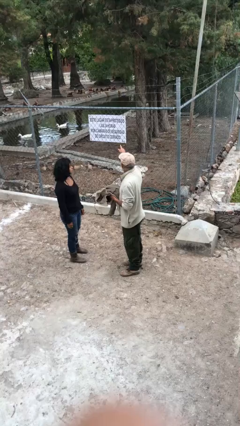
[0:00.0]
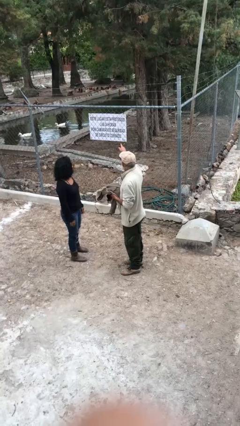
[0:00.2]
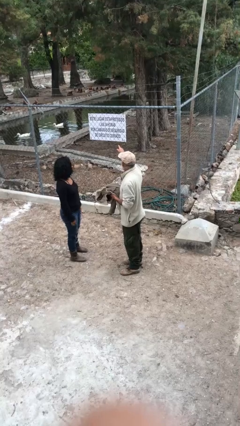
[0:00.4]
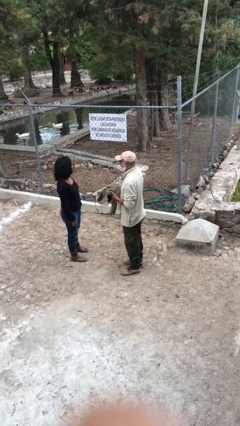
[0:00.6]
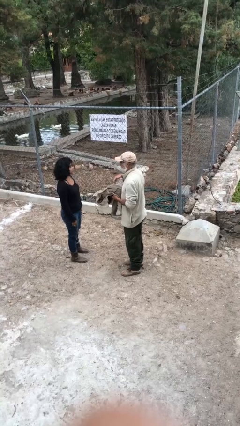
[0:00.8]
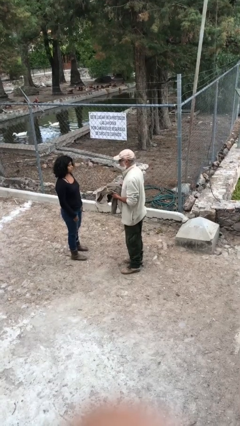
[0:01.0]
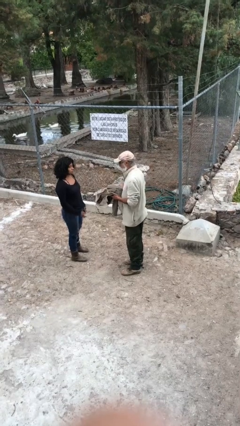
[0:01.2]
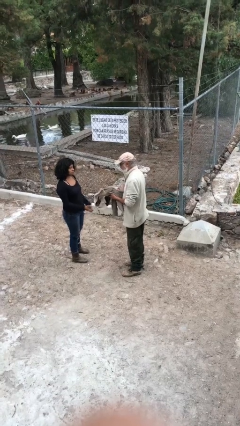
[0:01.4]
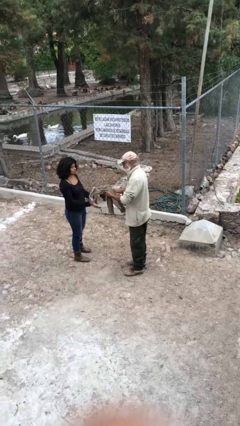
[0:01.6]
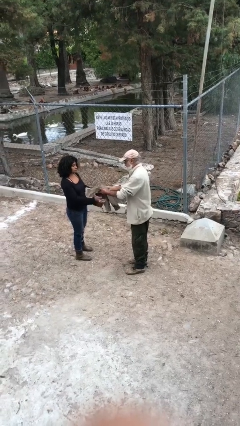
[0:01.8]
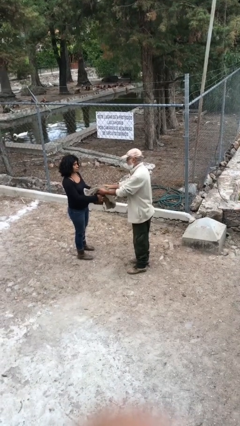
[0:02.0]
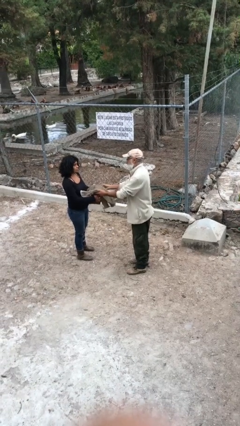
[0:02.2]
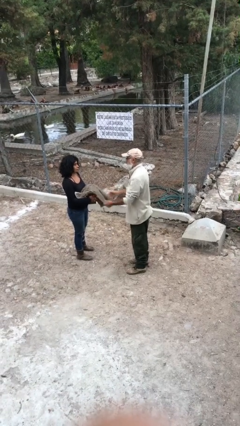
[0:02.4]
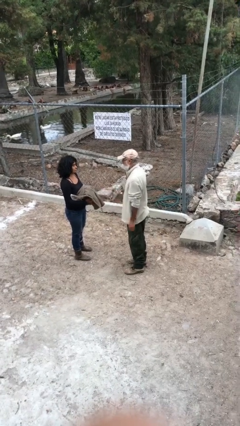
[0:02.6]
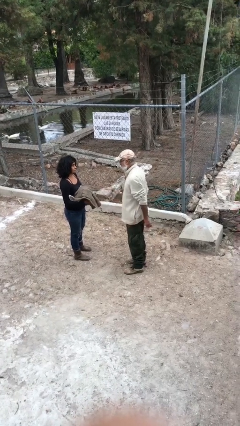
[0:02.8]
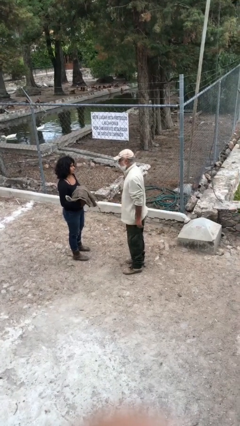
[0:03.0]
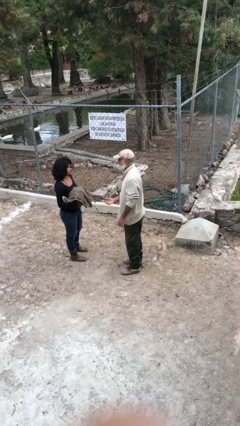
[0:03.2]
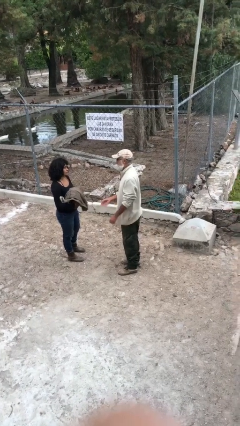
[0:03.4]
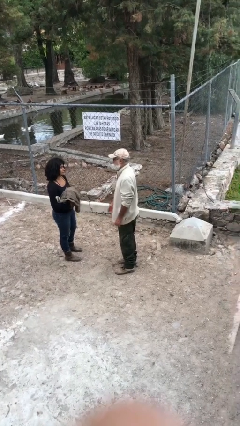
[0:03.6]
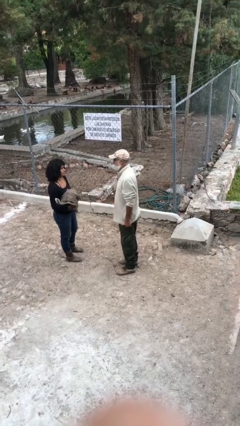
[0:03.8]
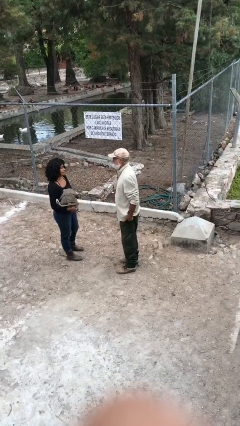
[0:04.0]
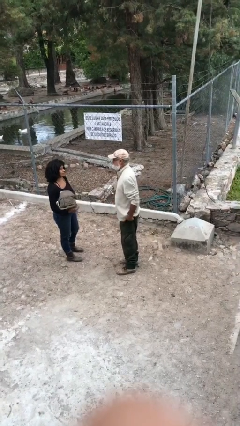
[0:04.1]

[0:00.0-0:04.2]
person transfers object to person

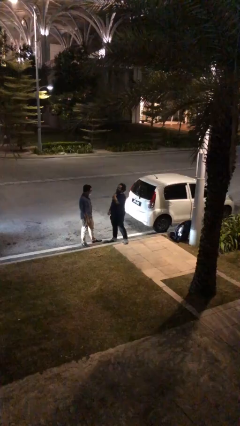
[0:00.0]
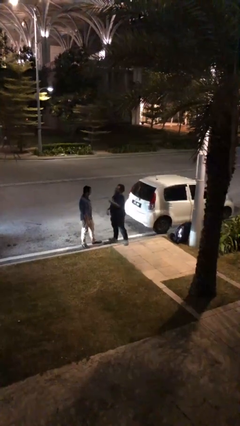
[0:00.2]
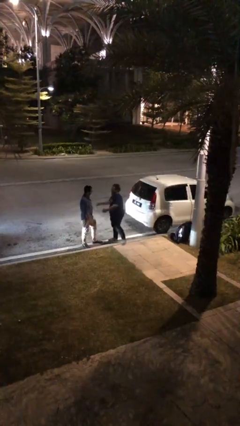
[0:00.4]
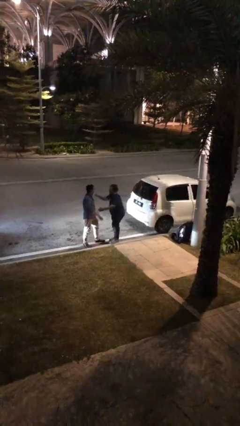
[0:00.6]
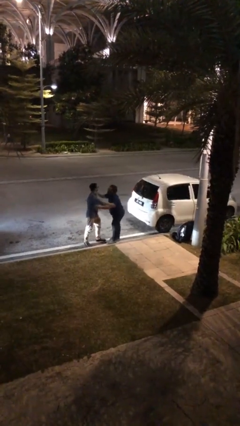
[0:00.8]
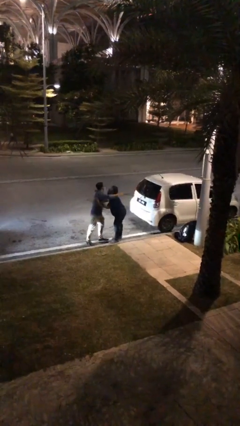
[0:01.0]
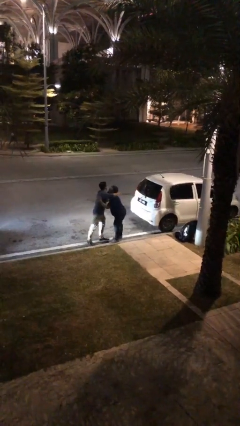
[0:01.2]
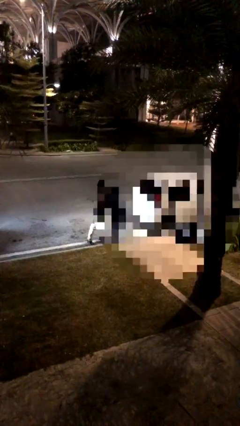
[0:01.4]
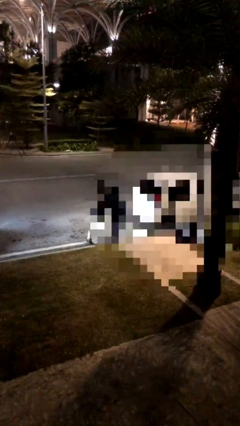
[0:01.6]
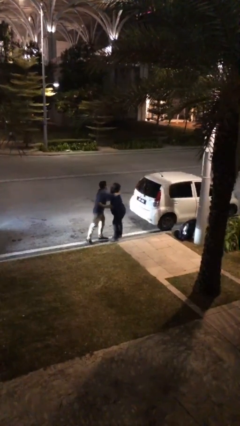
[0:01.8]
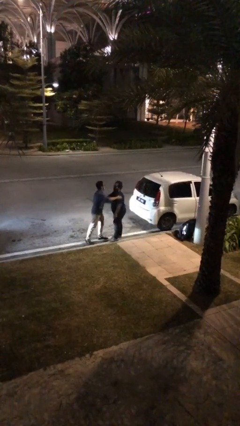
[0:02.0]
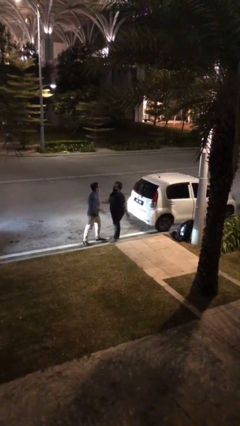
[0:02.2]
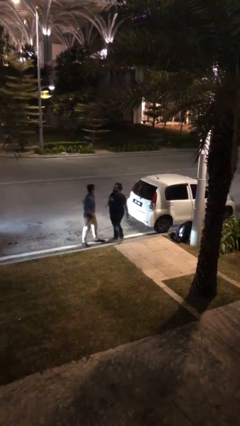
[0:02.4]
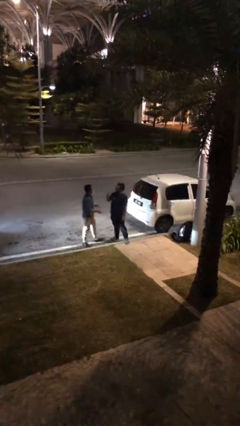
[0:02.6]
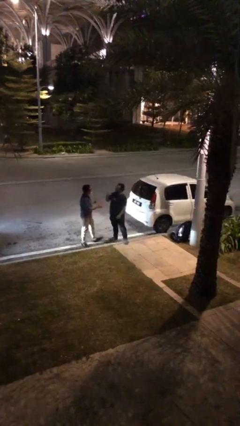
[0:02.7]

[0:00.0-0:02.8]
person embraces person

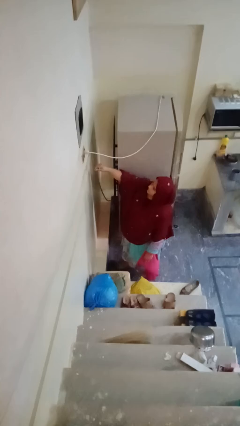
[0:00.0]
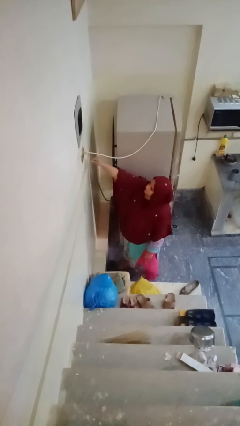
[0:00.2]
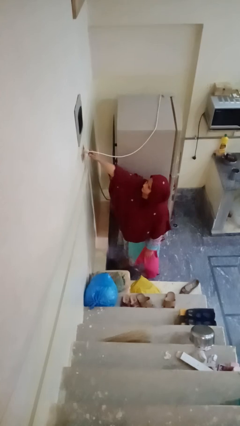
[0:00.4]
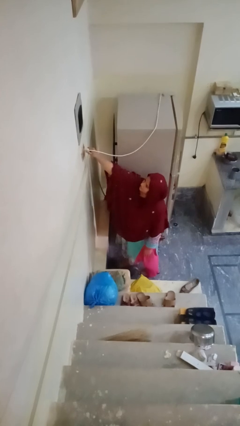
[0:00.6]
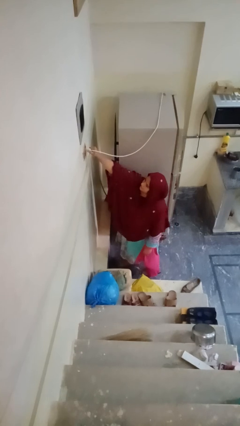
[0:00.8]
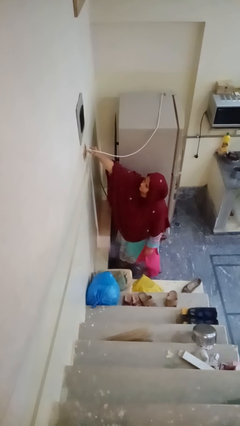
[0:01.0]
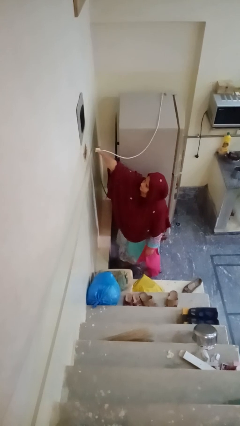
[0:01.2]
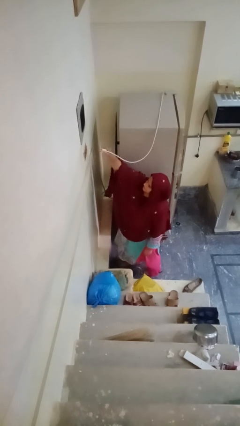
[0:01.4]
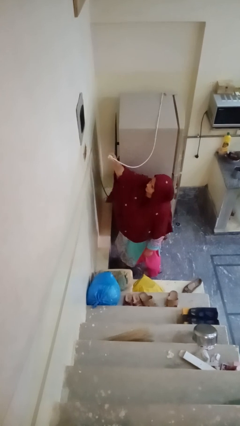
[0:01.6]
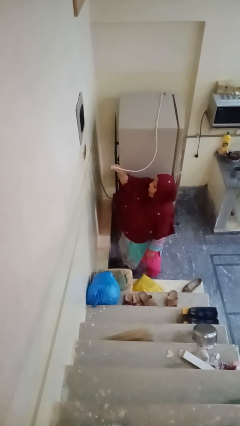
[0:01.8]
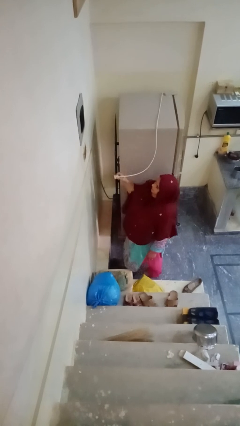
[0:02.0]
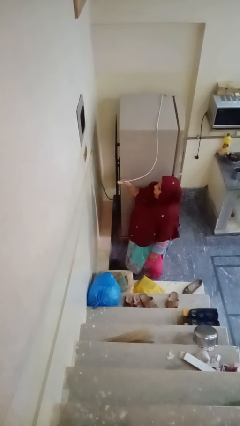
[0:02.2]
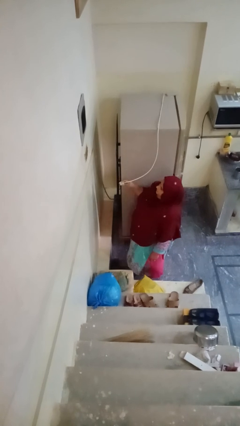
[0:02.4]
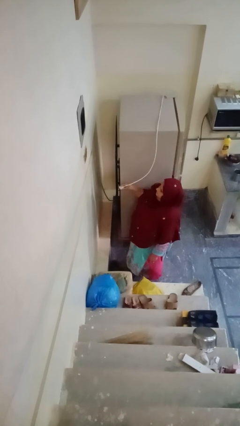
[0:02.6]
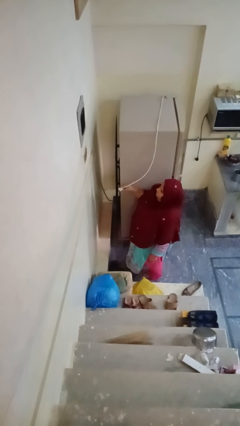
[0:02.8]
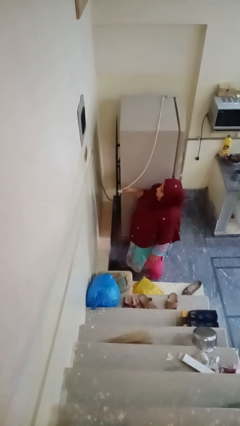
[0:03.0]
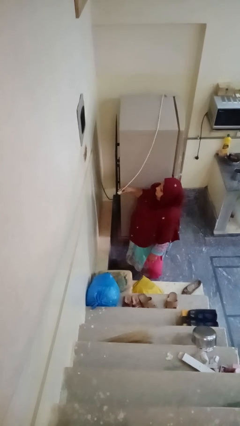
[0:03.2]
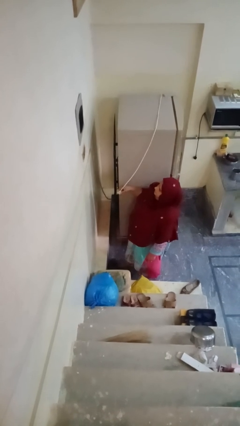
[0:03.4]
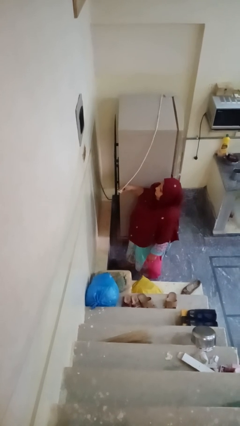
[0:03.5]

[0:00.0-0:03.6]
person unplugs from electrical socket

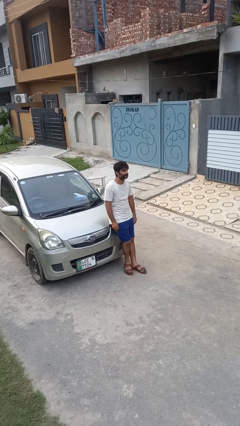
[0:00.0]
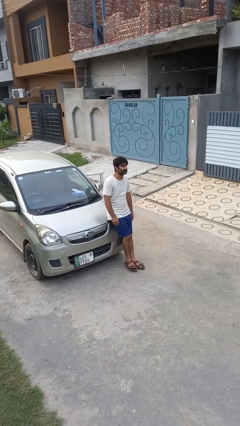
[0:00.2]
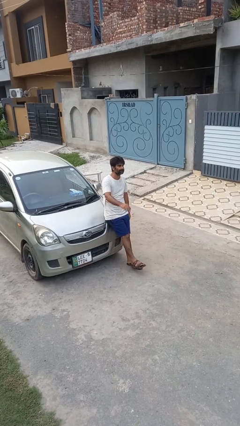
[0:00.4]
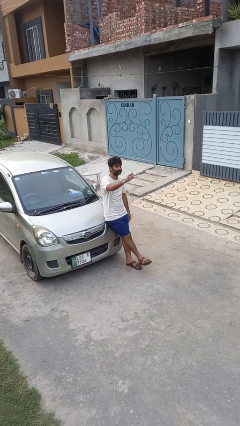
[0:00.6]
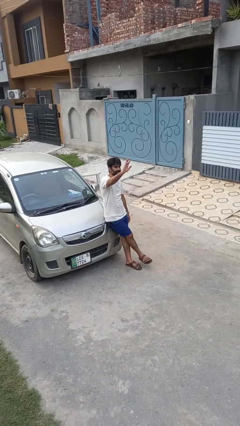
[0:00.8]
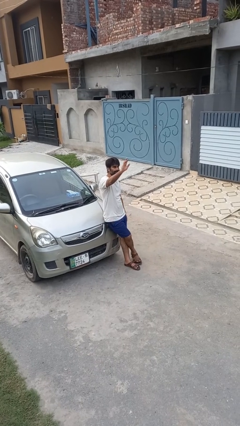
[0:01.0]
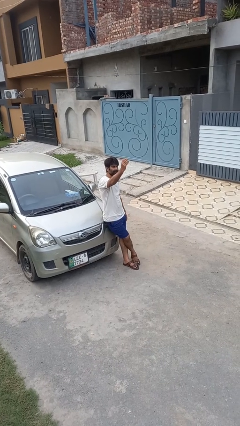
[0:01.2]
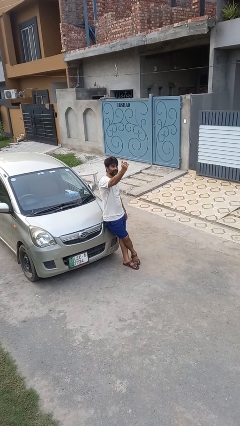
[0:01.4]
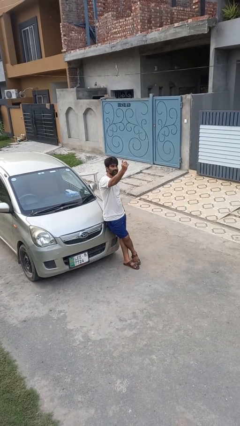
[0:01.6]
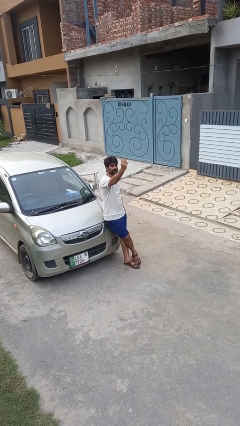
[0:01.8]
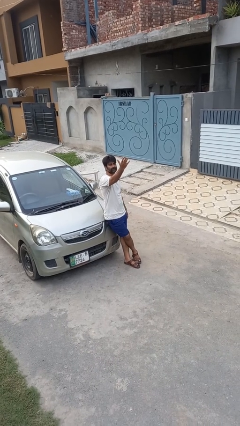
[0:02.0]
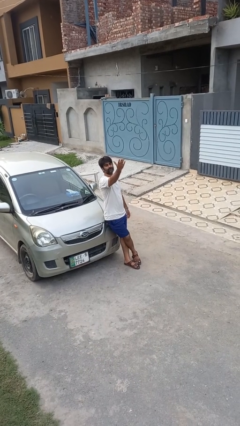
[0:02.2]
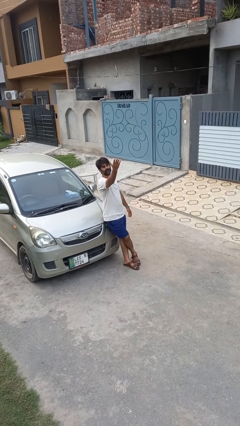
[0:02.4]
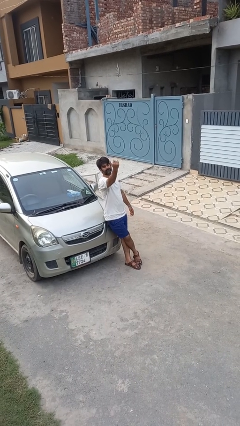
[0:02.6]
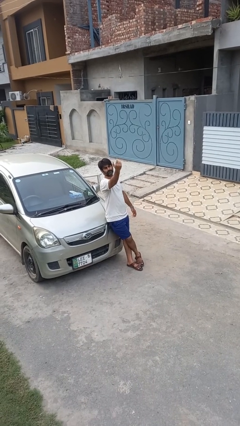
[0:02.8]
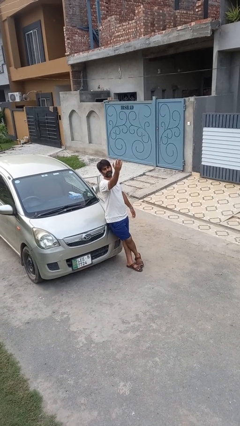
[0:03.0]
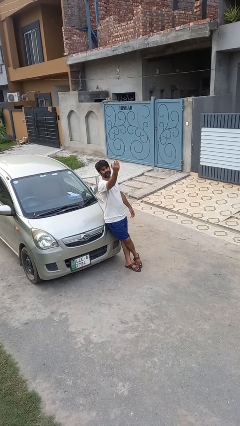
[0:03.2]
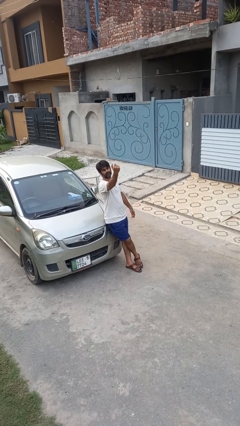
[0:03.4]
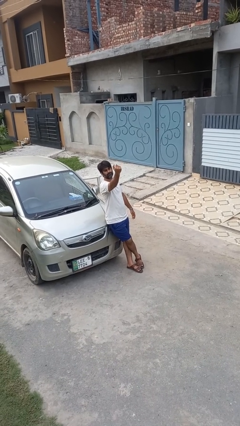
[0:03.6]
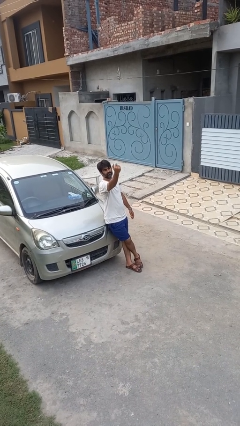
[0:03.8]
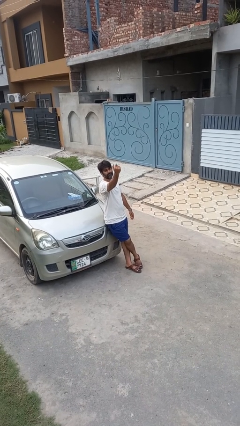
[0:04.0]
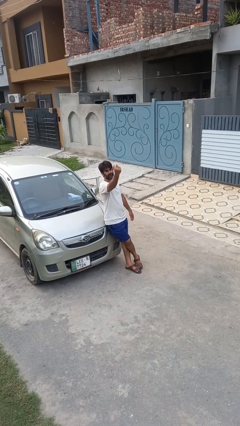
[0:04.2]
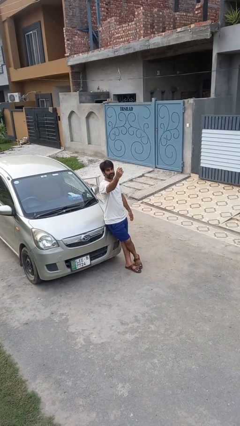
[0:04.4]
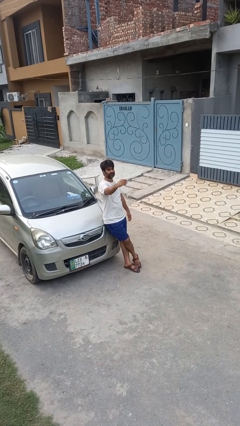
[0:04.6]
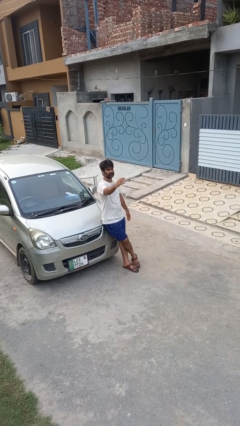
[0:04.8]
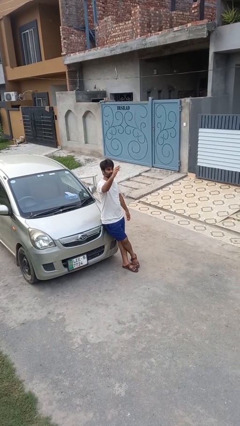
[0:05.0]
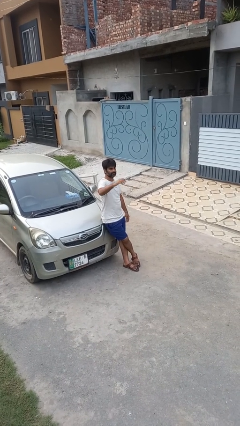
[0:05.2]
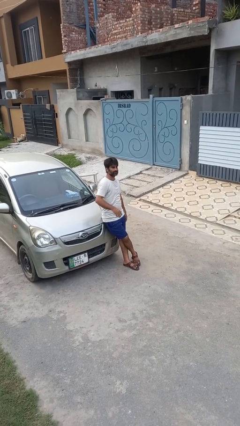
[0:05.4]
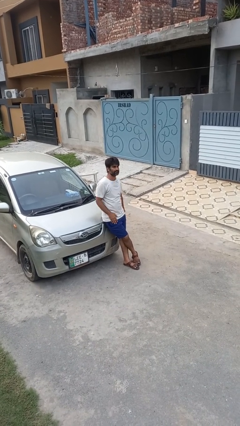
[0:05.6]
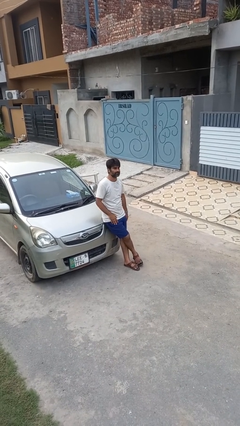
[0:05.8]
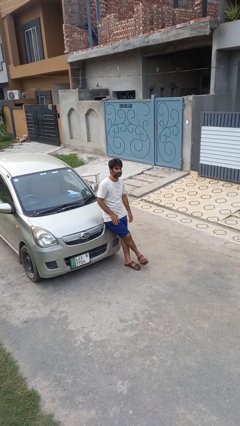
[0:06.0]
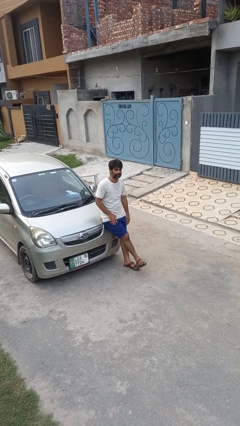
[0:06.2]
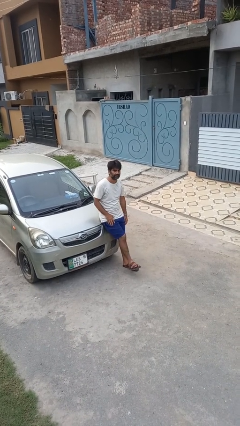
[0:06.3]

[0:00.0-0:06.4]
person gestures come here

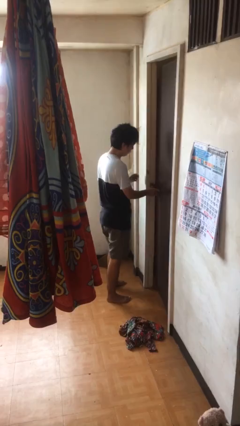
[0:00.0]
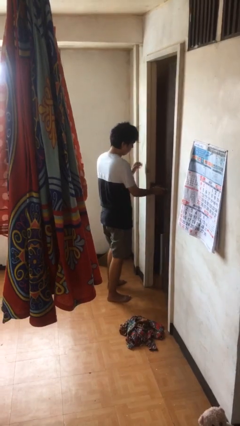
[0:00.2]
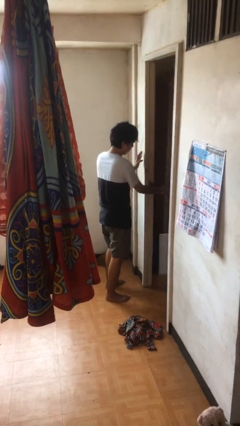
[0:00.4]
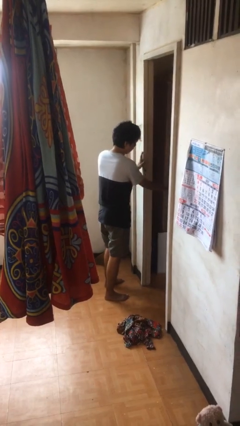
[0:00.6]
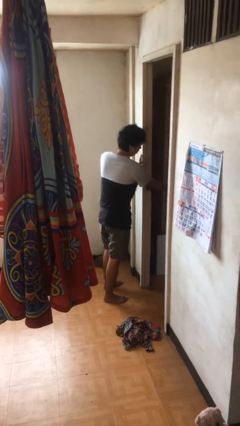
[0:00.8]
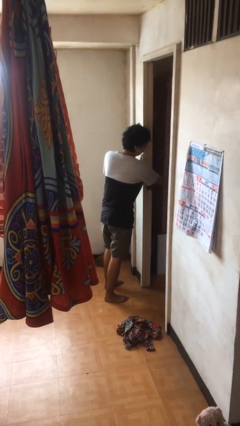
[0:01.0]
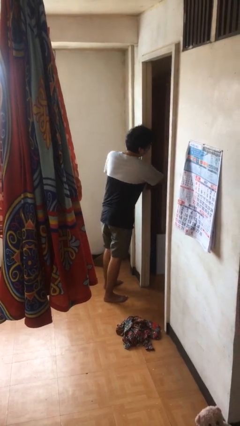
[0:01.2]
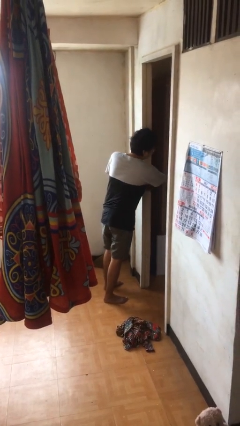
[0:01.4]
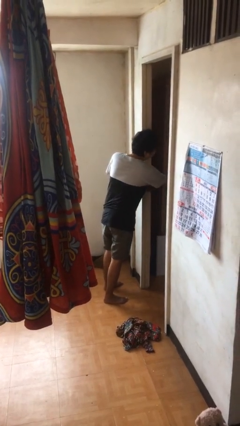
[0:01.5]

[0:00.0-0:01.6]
person opens facility door
